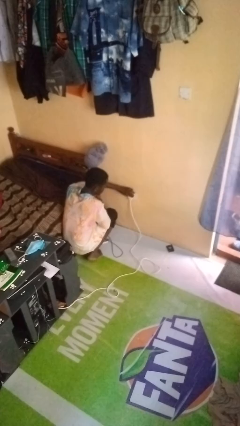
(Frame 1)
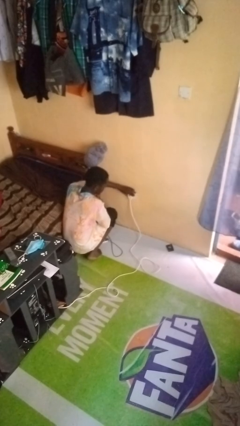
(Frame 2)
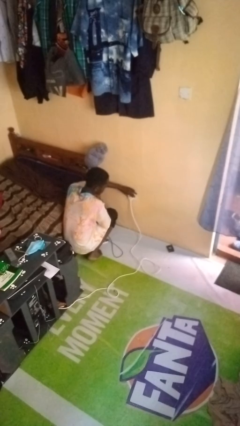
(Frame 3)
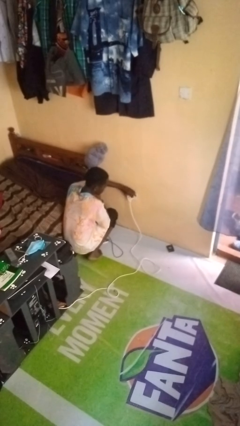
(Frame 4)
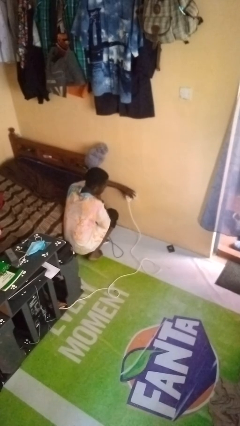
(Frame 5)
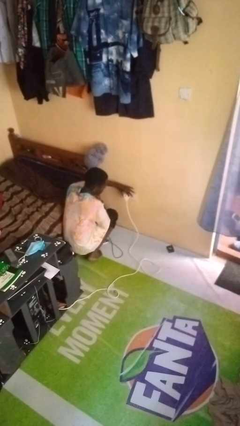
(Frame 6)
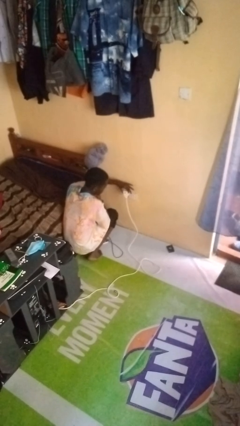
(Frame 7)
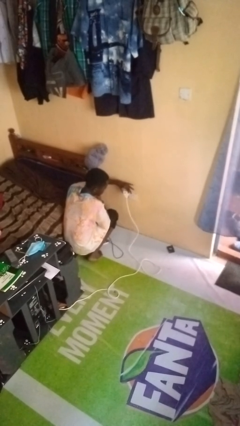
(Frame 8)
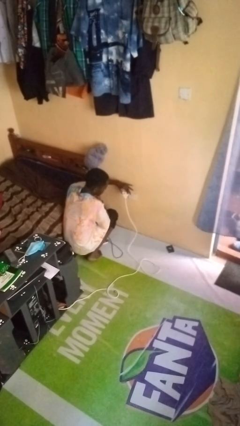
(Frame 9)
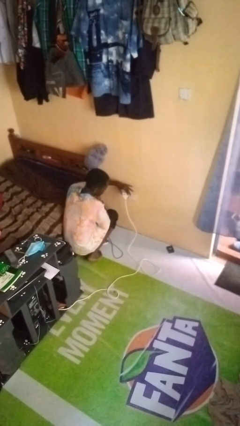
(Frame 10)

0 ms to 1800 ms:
person unplugs from electrical socket

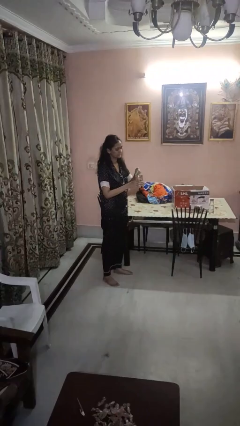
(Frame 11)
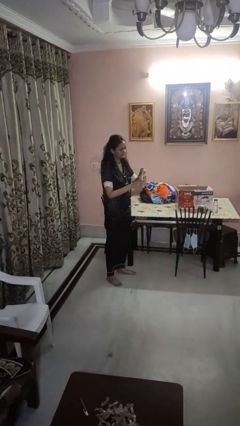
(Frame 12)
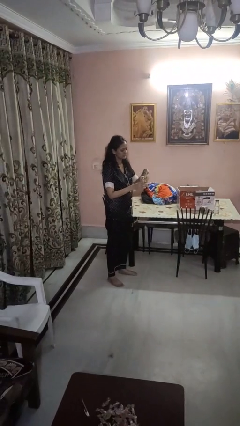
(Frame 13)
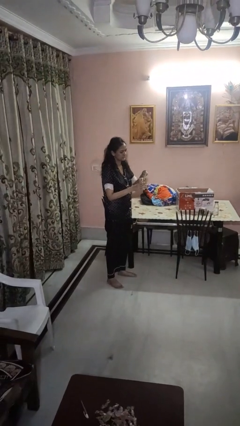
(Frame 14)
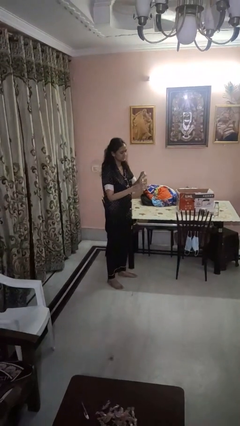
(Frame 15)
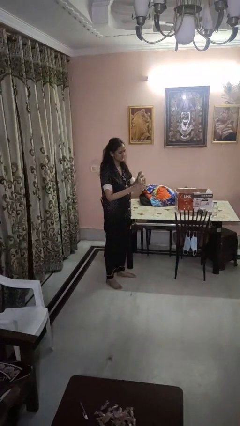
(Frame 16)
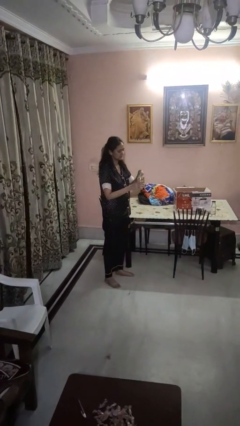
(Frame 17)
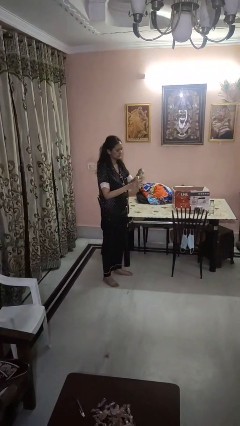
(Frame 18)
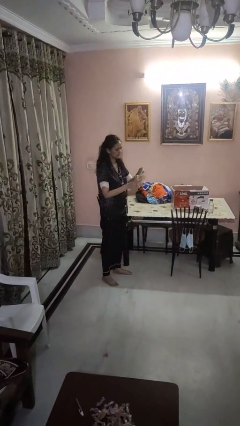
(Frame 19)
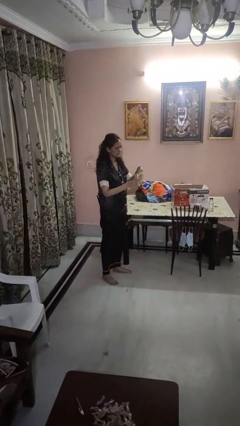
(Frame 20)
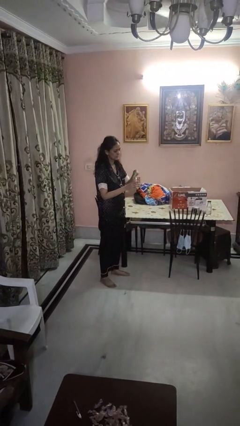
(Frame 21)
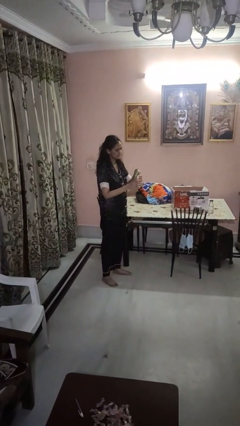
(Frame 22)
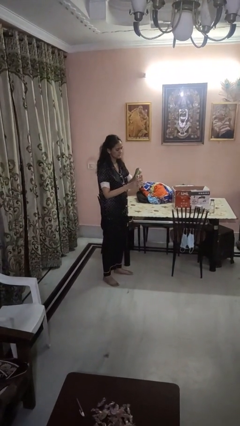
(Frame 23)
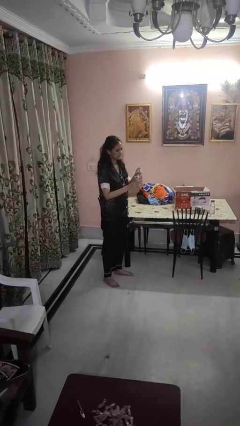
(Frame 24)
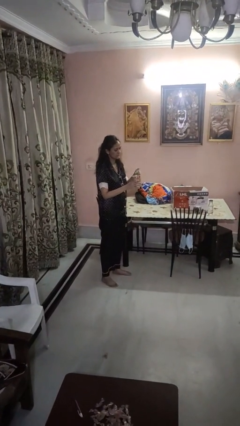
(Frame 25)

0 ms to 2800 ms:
person opens can with can opener

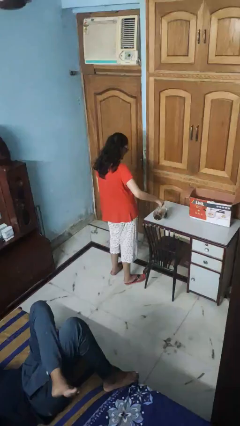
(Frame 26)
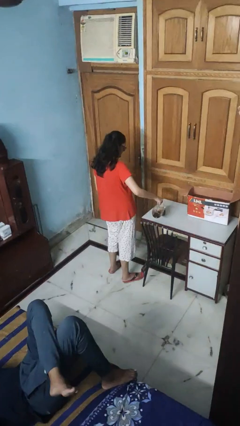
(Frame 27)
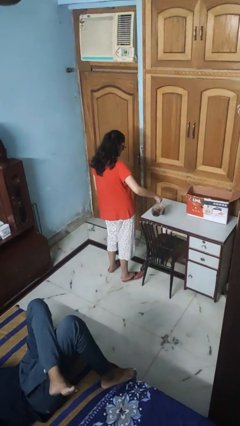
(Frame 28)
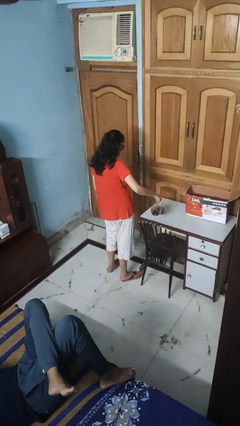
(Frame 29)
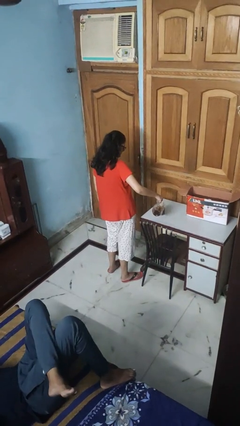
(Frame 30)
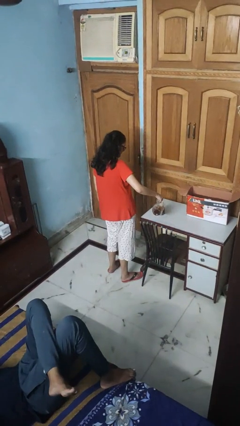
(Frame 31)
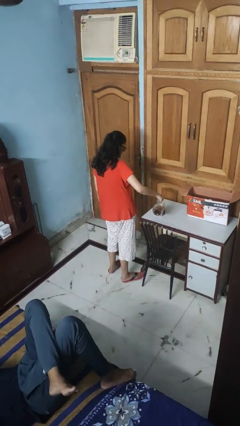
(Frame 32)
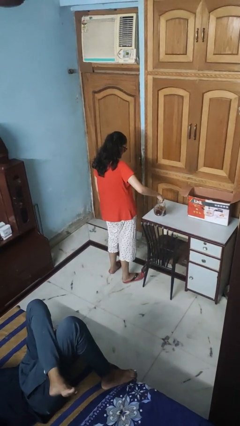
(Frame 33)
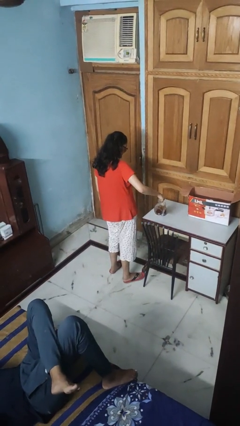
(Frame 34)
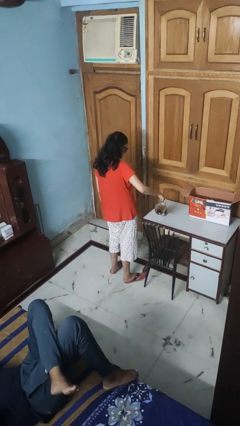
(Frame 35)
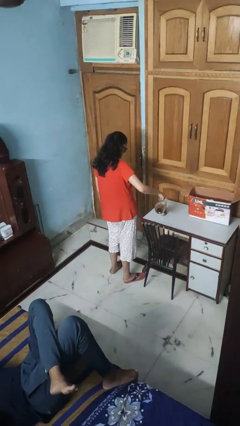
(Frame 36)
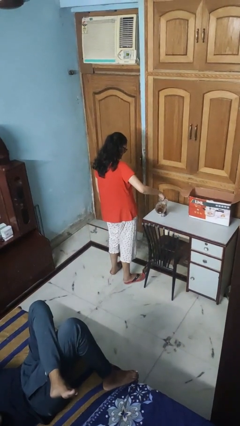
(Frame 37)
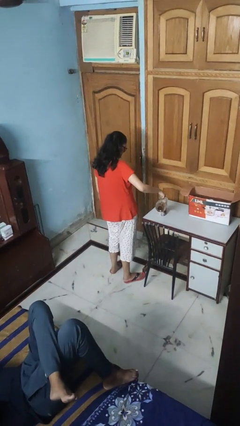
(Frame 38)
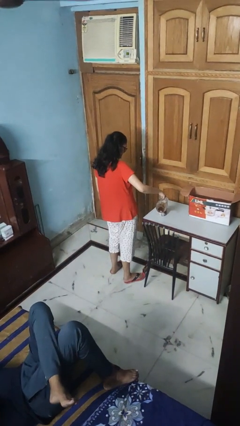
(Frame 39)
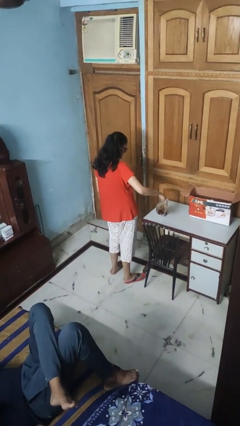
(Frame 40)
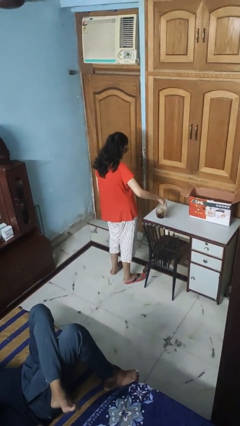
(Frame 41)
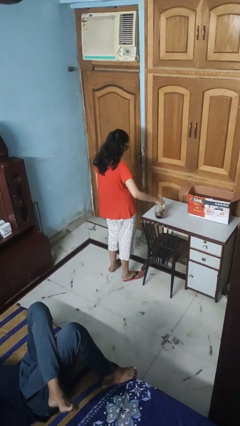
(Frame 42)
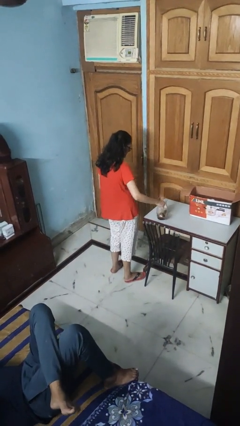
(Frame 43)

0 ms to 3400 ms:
person pours coffee into mug

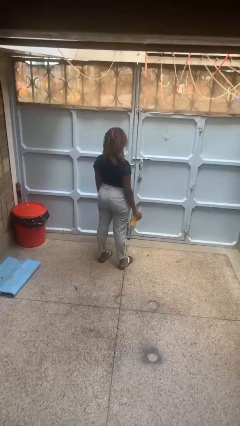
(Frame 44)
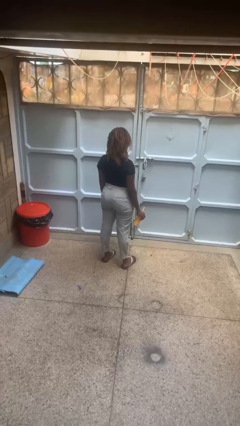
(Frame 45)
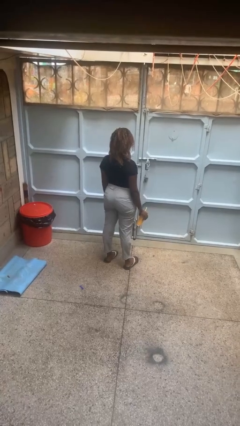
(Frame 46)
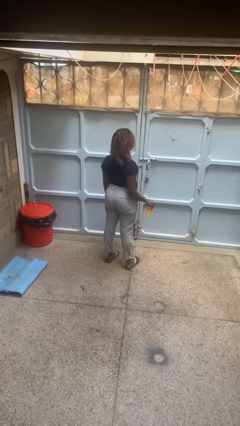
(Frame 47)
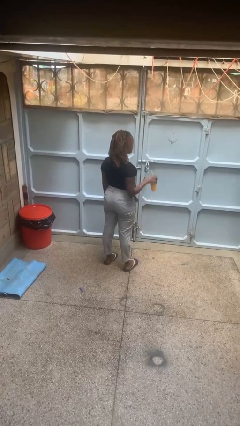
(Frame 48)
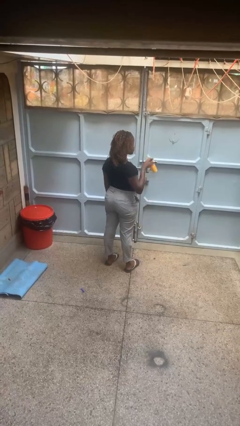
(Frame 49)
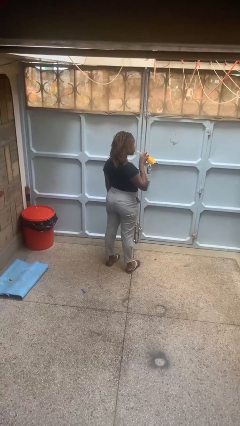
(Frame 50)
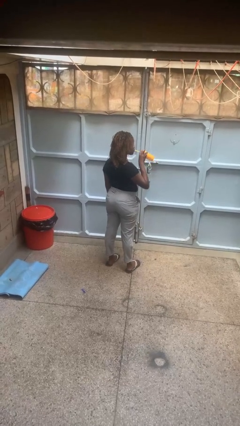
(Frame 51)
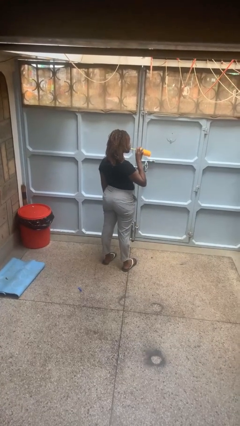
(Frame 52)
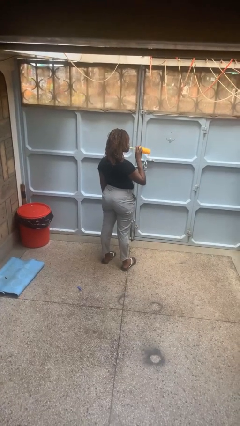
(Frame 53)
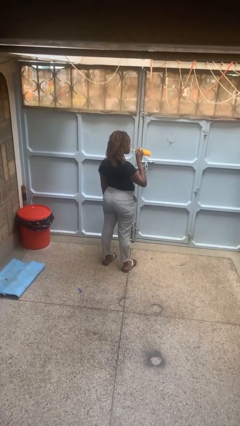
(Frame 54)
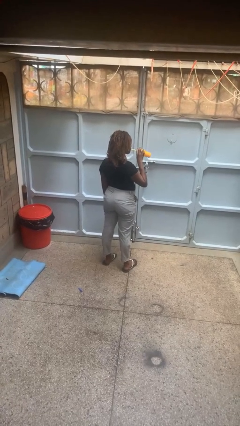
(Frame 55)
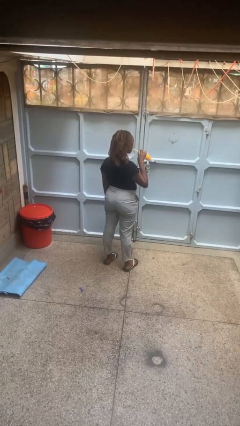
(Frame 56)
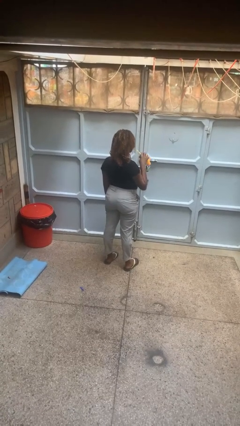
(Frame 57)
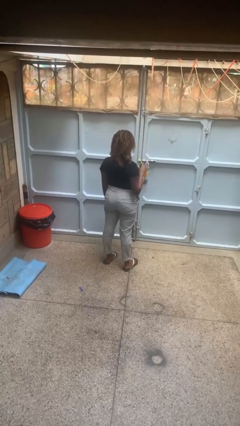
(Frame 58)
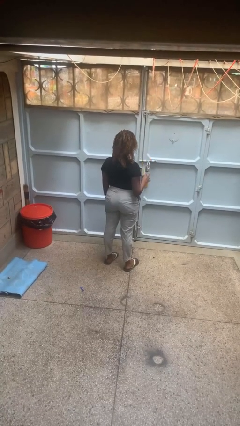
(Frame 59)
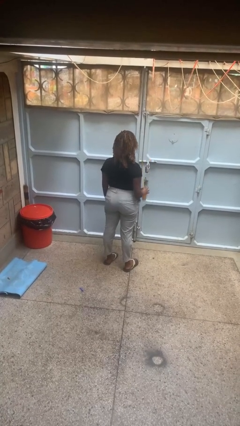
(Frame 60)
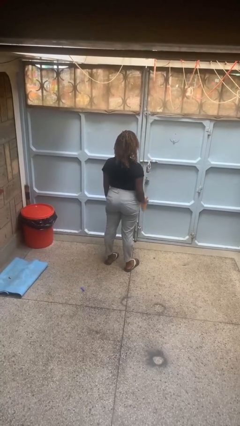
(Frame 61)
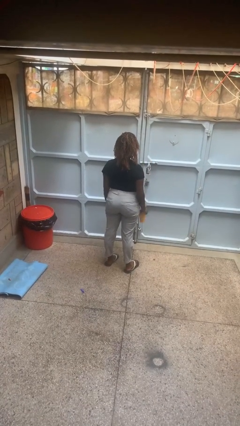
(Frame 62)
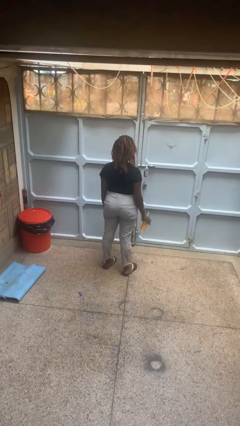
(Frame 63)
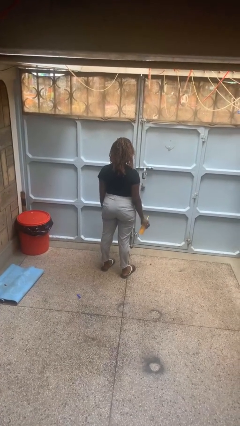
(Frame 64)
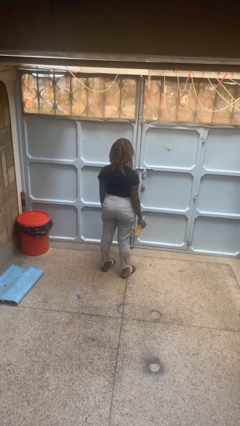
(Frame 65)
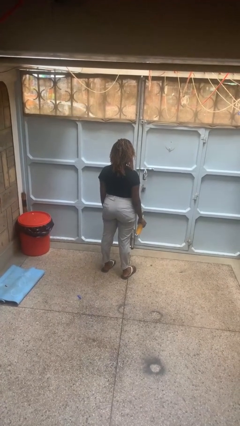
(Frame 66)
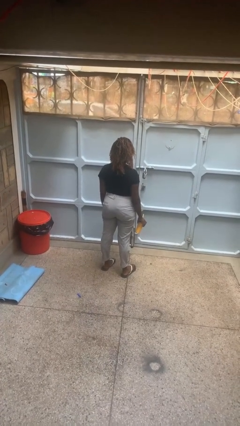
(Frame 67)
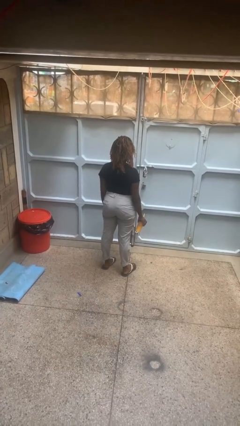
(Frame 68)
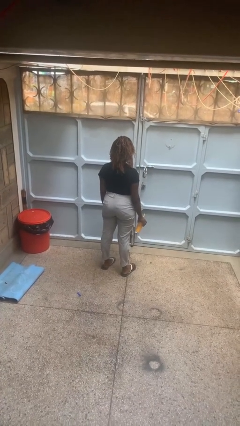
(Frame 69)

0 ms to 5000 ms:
person drinks from straw

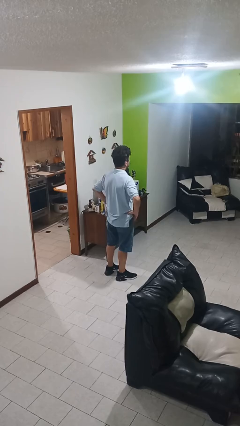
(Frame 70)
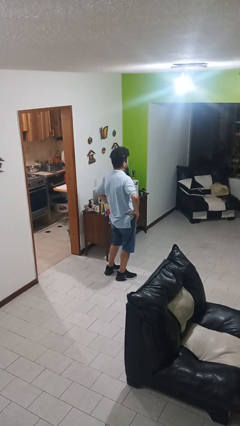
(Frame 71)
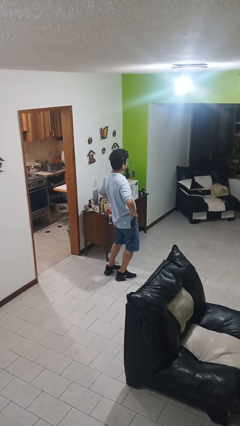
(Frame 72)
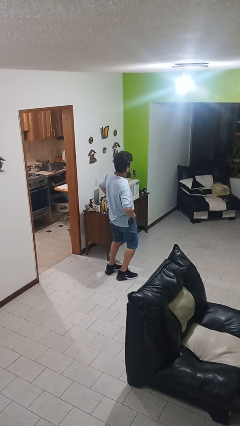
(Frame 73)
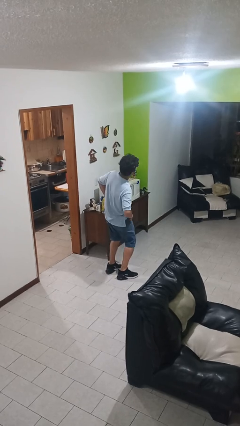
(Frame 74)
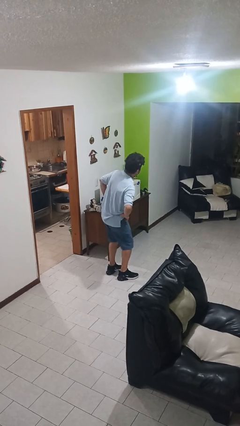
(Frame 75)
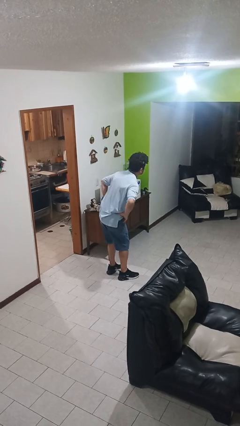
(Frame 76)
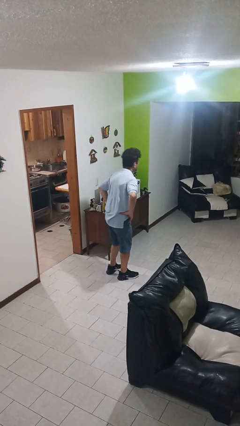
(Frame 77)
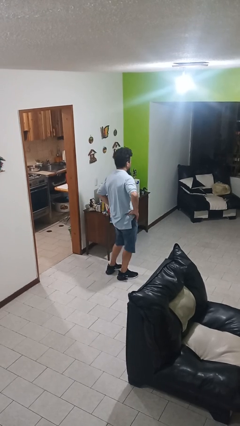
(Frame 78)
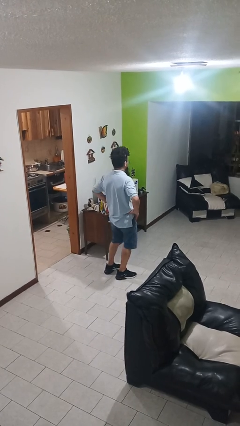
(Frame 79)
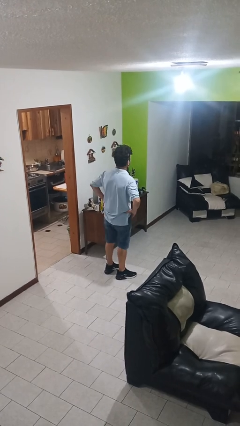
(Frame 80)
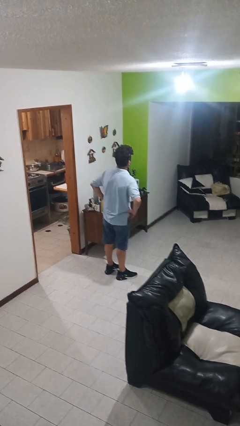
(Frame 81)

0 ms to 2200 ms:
person wiggles hips

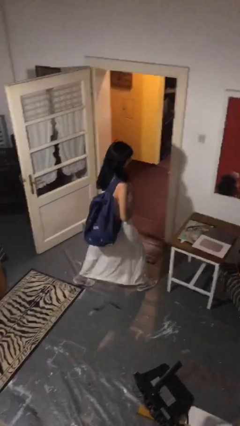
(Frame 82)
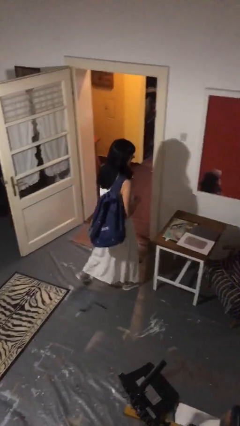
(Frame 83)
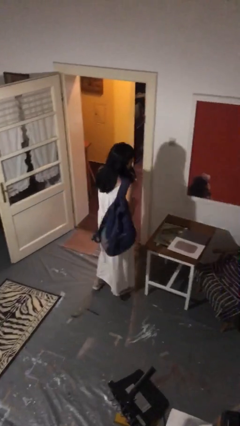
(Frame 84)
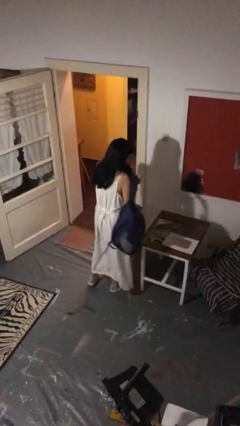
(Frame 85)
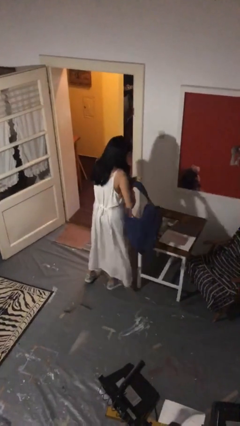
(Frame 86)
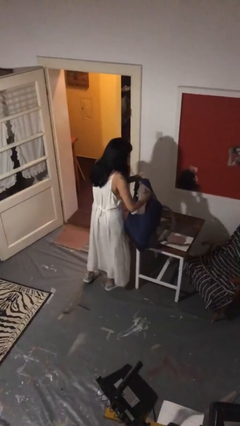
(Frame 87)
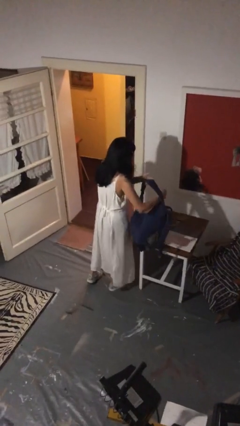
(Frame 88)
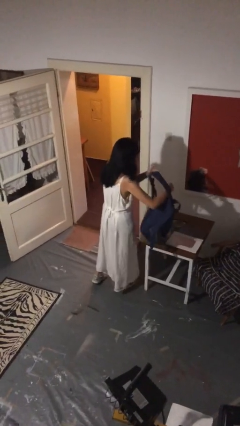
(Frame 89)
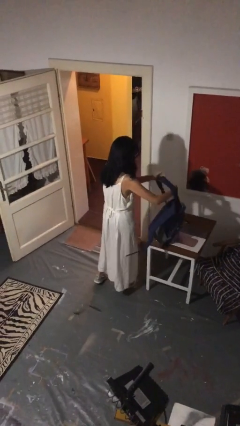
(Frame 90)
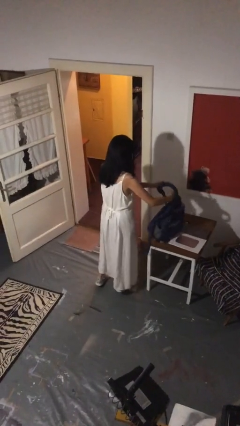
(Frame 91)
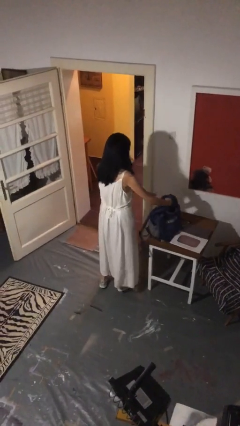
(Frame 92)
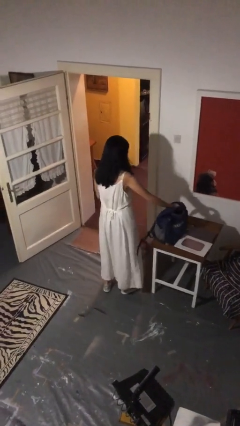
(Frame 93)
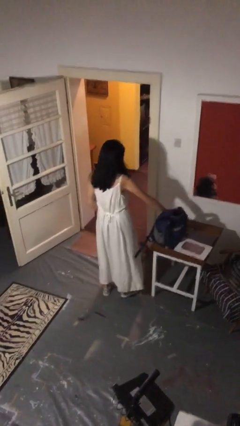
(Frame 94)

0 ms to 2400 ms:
person puts down object on table

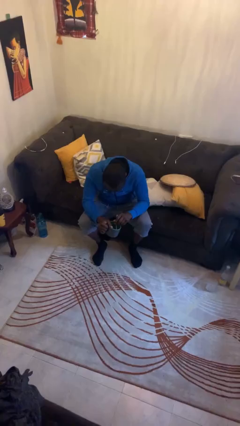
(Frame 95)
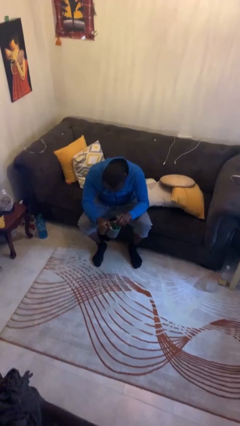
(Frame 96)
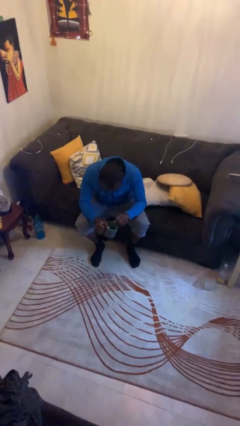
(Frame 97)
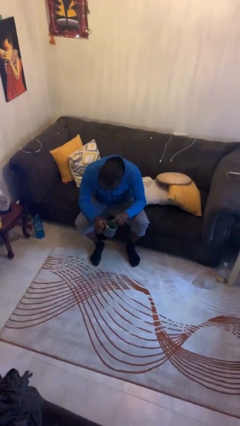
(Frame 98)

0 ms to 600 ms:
person stirs mug
